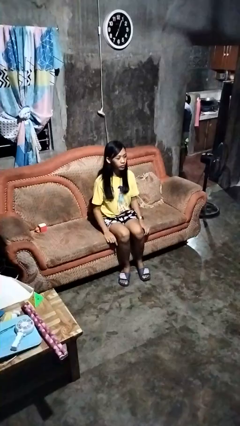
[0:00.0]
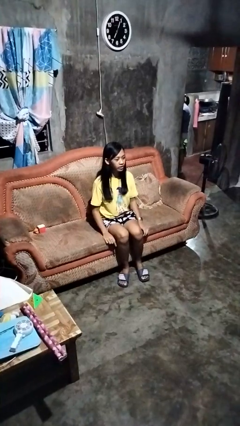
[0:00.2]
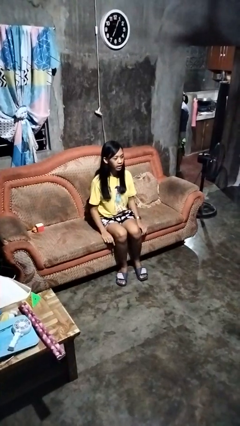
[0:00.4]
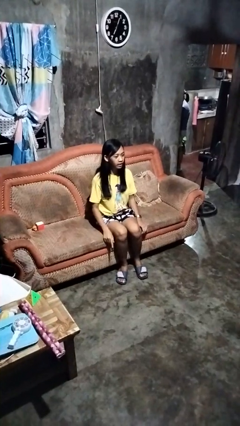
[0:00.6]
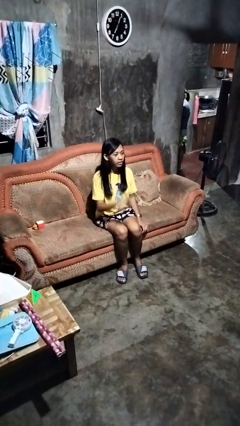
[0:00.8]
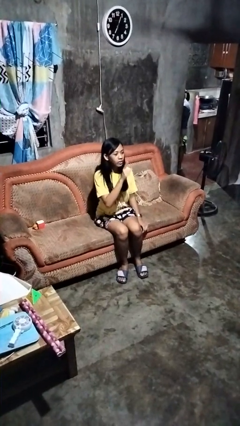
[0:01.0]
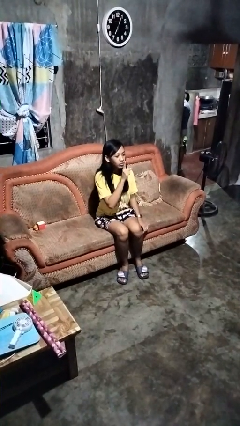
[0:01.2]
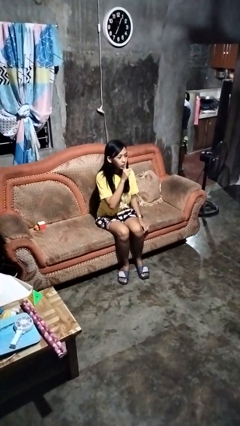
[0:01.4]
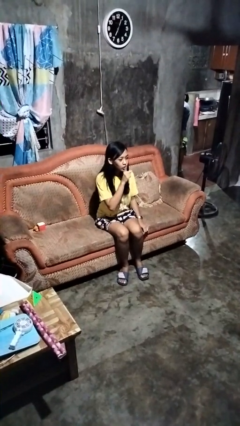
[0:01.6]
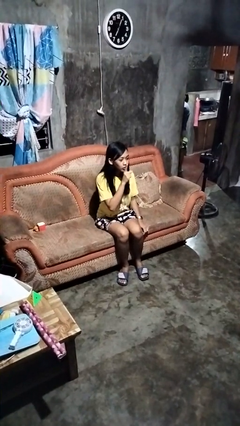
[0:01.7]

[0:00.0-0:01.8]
person gestures be quiet

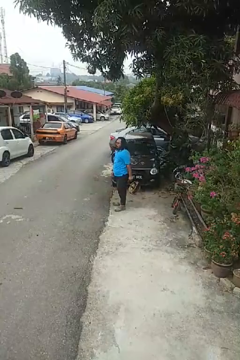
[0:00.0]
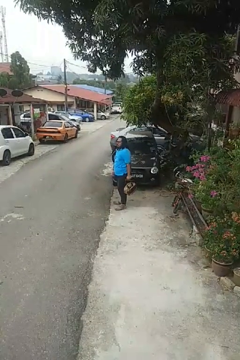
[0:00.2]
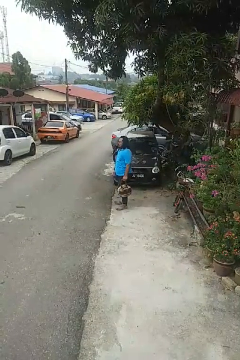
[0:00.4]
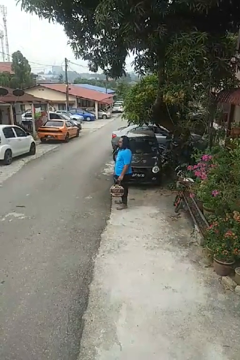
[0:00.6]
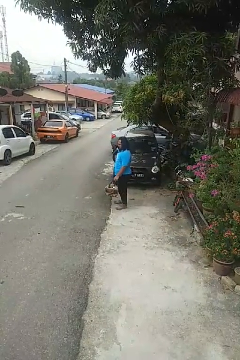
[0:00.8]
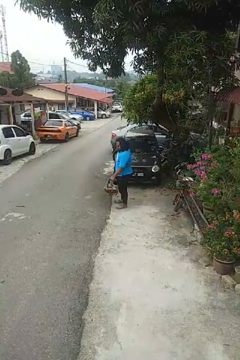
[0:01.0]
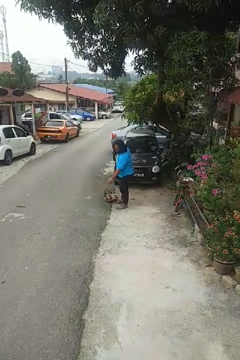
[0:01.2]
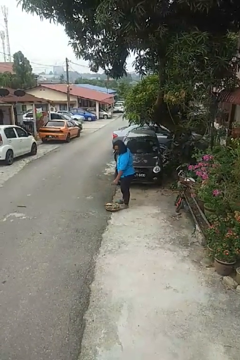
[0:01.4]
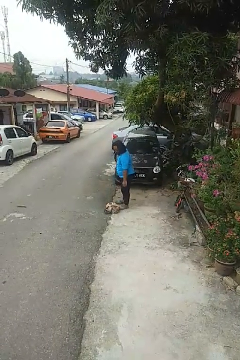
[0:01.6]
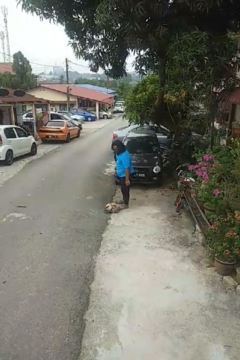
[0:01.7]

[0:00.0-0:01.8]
person drops object

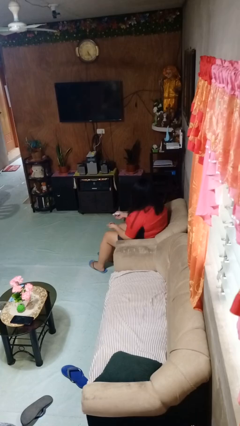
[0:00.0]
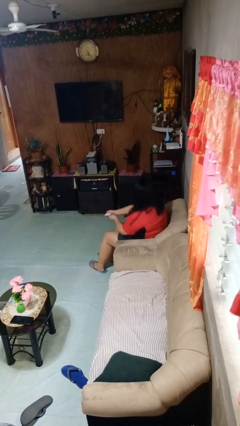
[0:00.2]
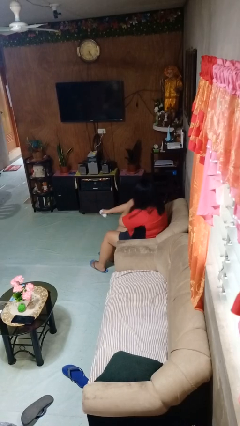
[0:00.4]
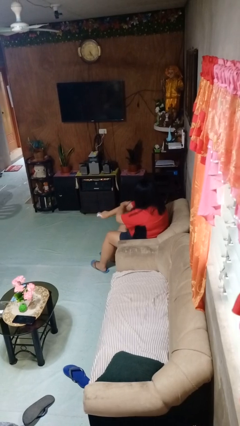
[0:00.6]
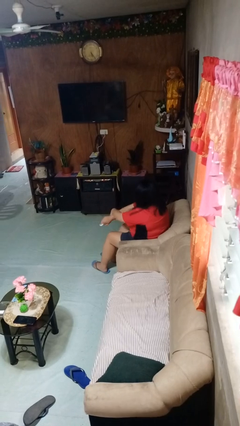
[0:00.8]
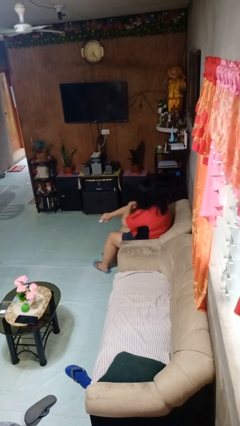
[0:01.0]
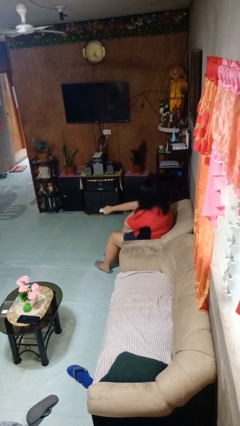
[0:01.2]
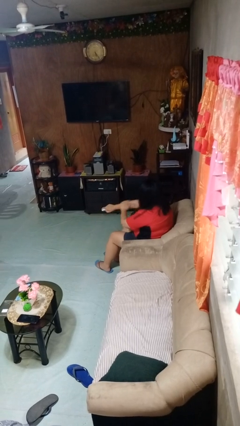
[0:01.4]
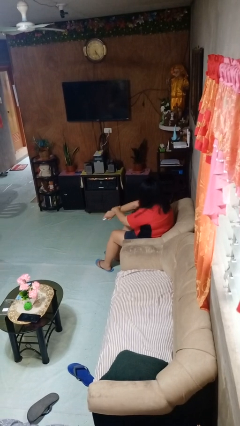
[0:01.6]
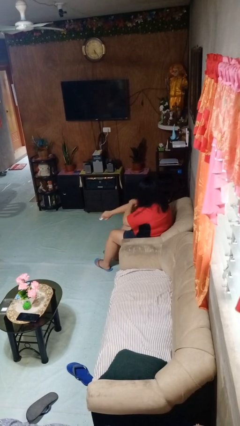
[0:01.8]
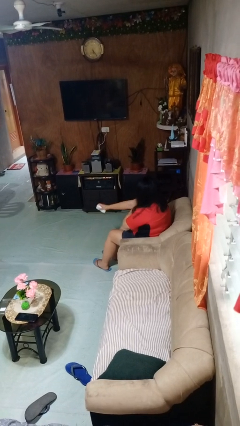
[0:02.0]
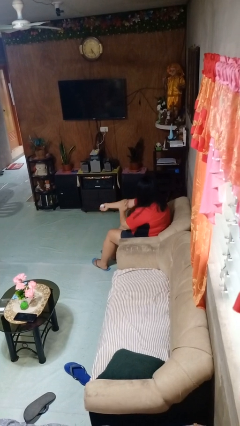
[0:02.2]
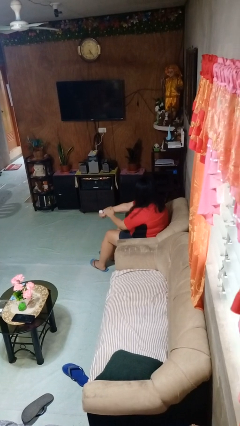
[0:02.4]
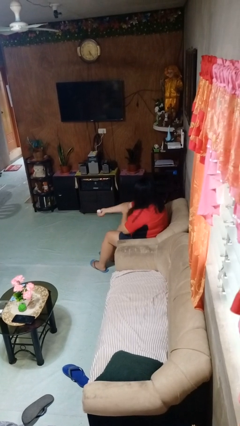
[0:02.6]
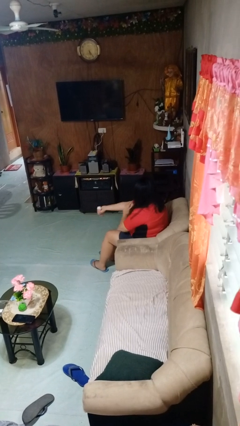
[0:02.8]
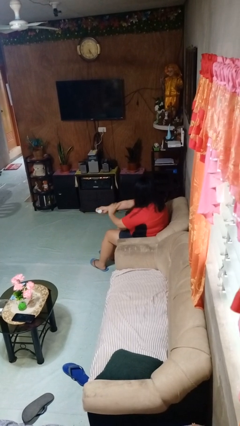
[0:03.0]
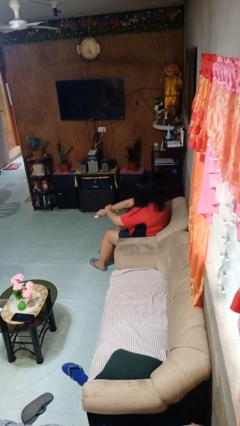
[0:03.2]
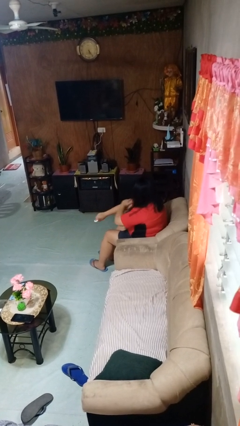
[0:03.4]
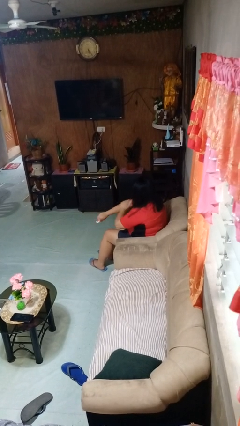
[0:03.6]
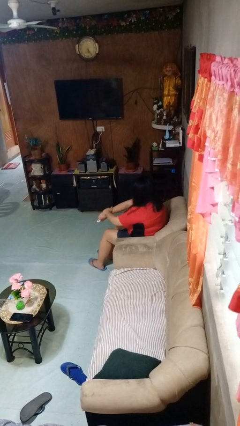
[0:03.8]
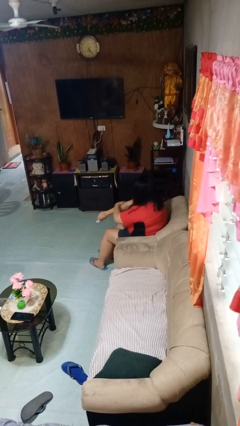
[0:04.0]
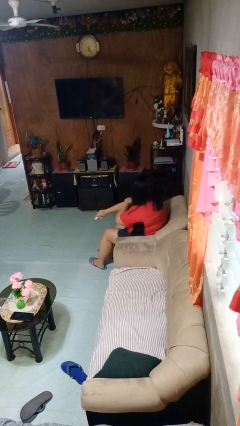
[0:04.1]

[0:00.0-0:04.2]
person applies sunscreen

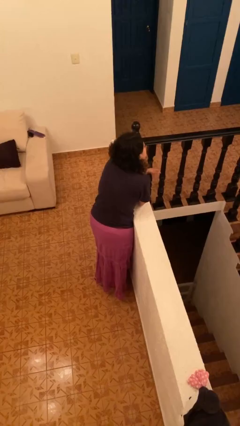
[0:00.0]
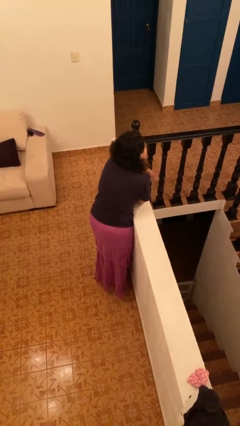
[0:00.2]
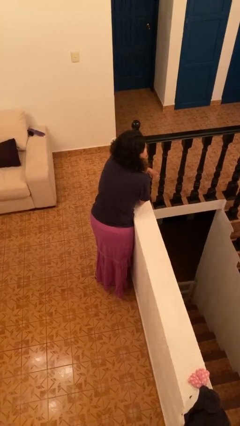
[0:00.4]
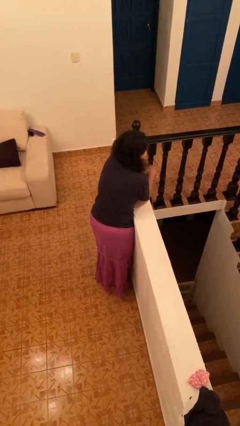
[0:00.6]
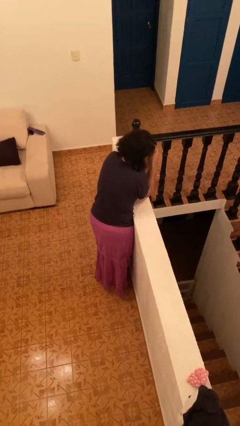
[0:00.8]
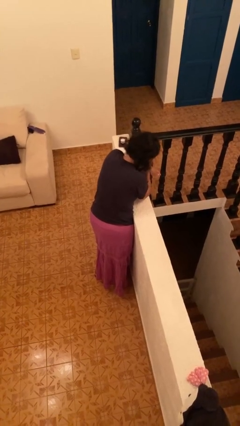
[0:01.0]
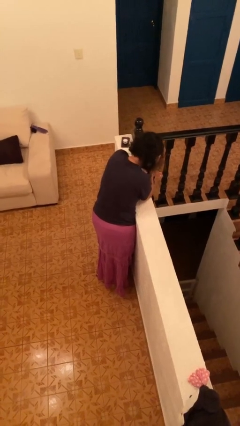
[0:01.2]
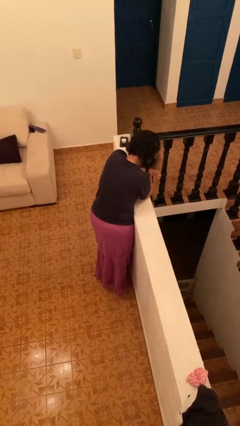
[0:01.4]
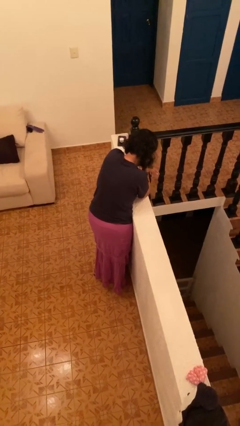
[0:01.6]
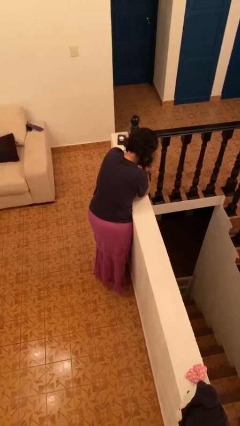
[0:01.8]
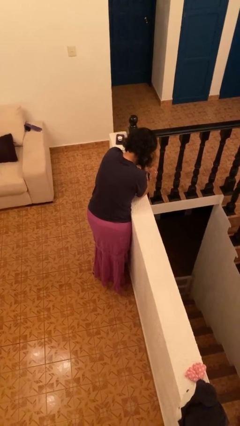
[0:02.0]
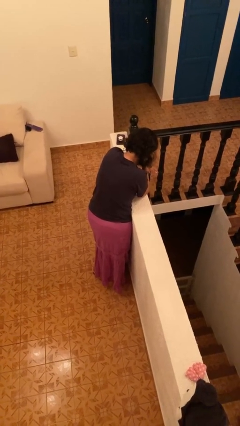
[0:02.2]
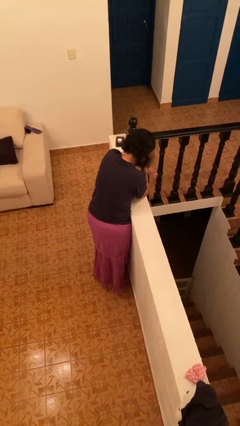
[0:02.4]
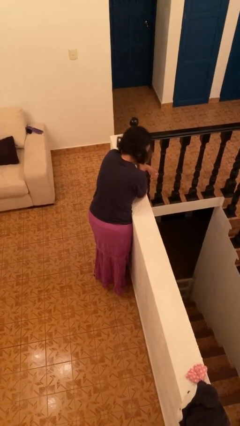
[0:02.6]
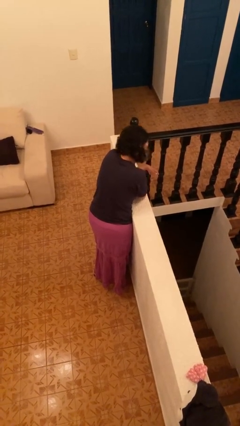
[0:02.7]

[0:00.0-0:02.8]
person covers face with hands

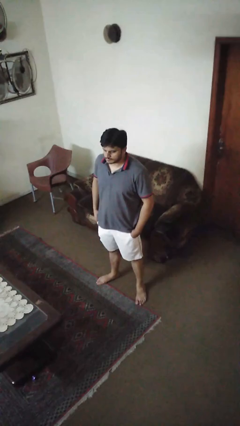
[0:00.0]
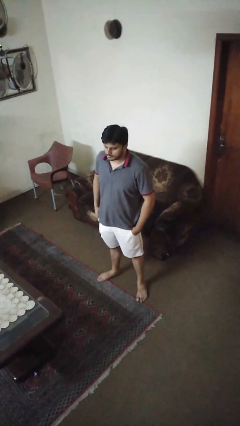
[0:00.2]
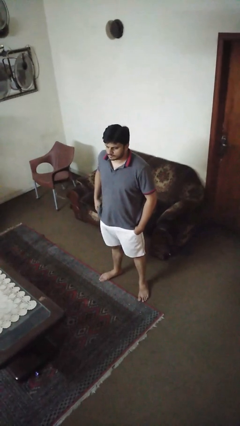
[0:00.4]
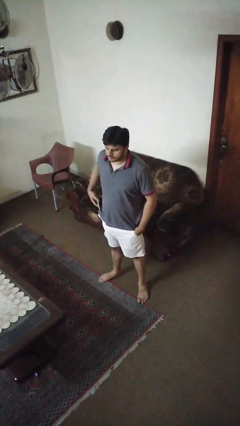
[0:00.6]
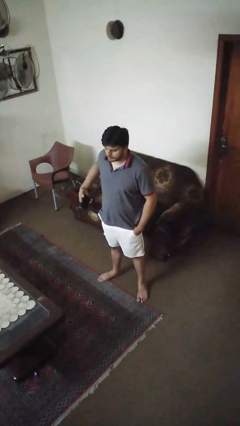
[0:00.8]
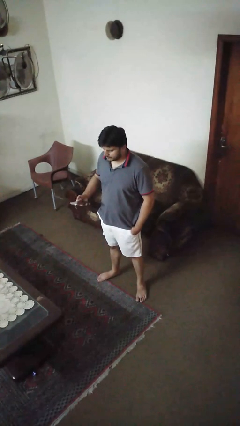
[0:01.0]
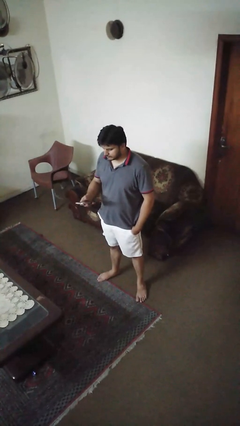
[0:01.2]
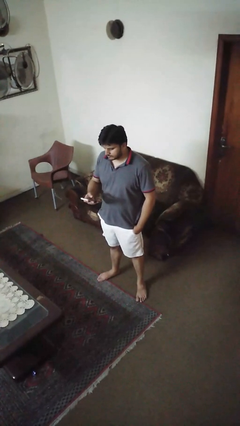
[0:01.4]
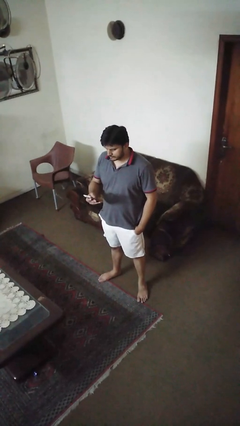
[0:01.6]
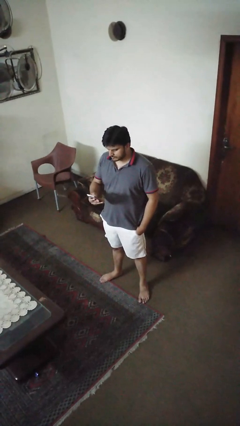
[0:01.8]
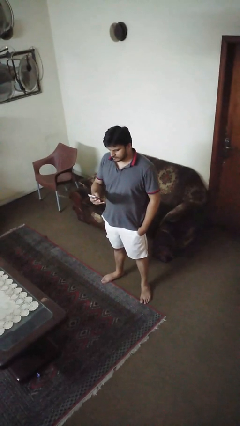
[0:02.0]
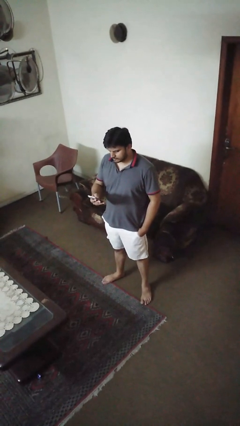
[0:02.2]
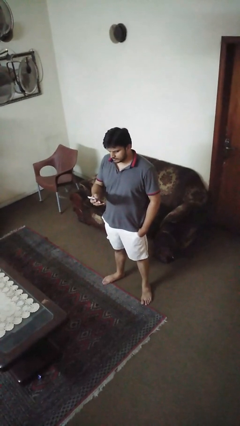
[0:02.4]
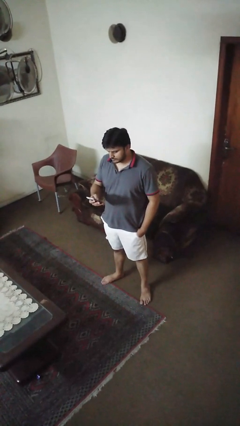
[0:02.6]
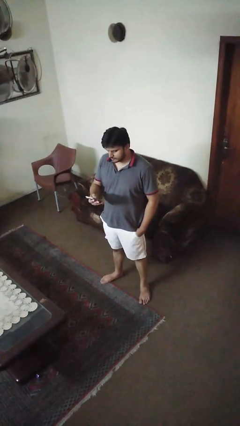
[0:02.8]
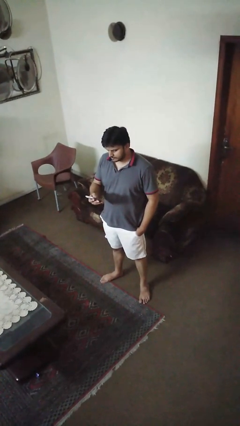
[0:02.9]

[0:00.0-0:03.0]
person takes phone from pocket

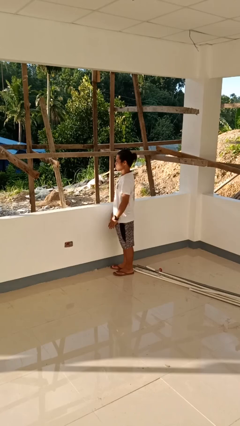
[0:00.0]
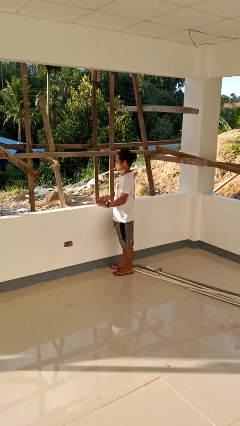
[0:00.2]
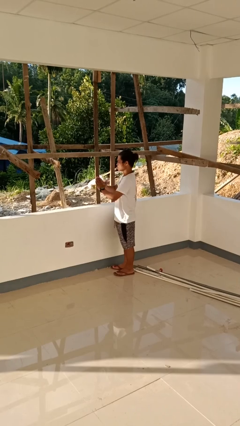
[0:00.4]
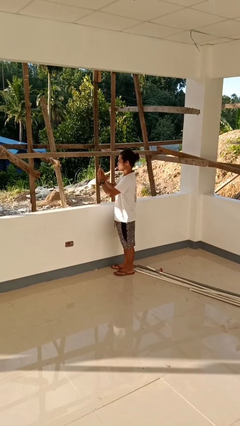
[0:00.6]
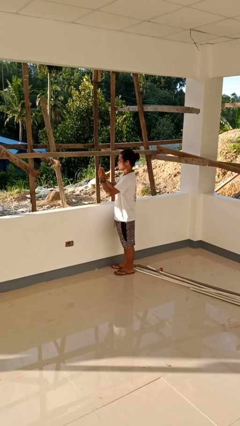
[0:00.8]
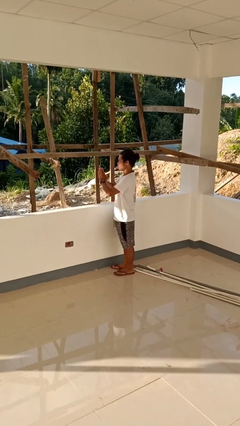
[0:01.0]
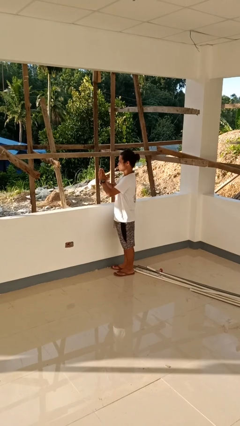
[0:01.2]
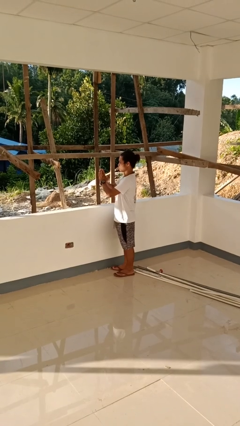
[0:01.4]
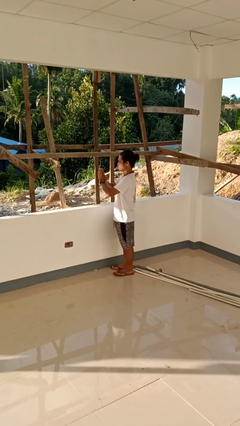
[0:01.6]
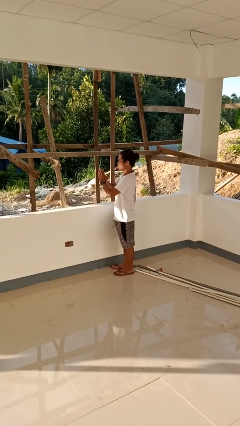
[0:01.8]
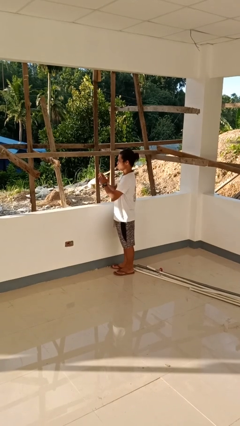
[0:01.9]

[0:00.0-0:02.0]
person prays

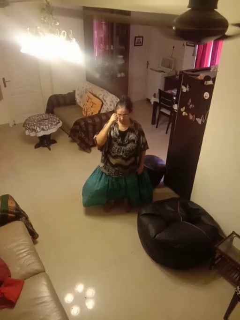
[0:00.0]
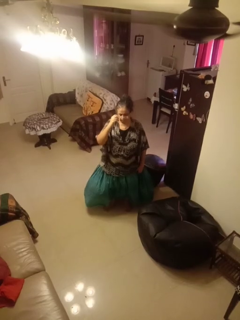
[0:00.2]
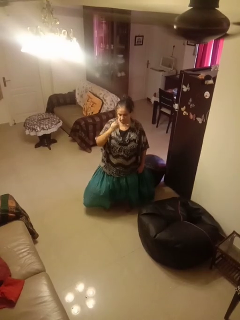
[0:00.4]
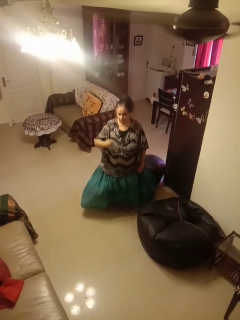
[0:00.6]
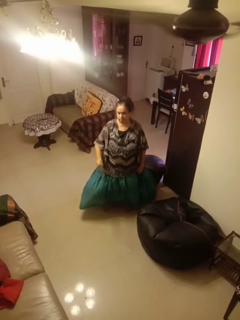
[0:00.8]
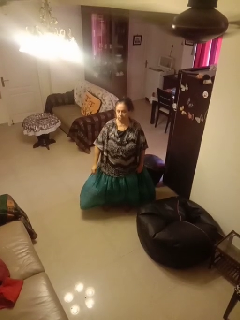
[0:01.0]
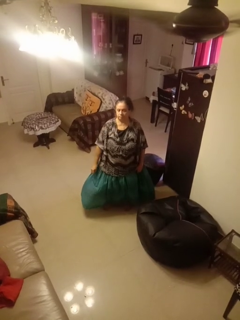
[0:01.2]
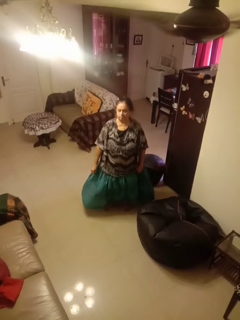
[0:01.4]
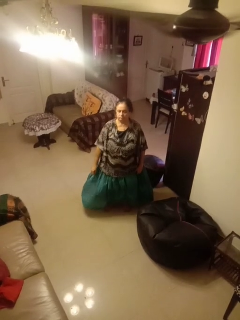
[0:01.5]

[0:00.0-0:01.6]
person takes off glasses

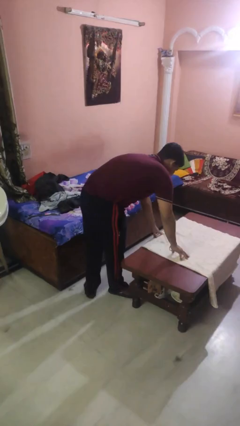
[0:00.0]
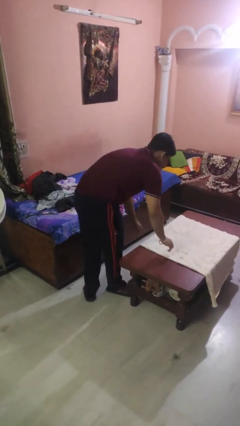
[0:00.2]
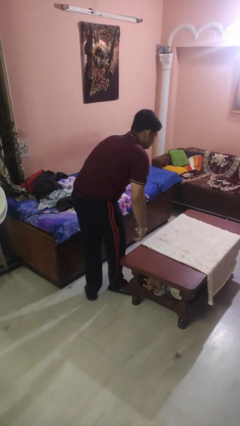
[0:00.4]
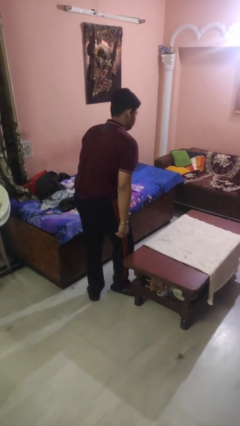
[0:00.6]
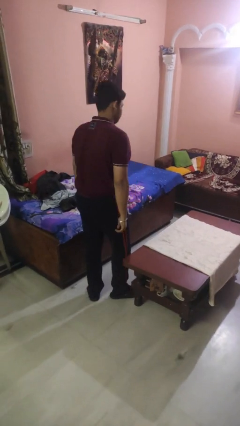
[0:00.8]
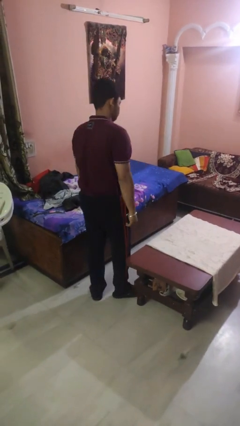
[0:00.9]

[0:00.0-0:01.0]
person spreads tablecloth
